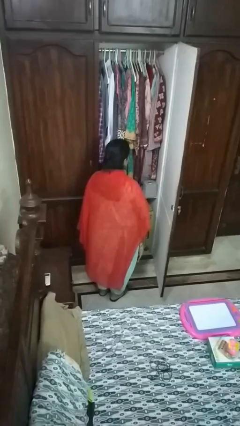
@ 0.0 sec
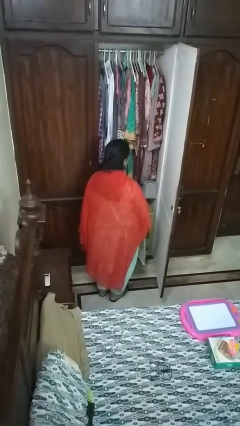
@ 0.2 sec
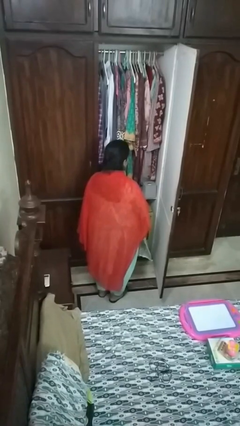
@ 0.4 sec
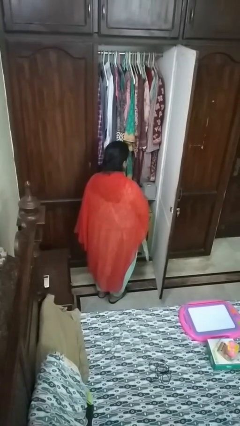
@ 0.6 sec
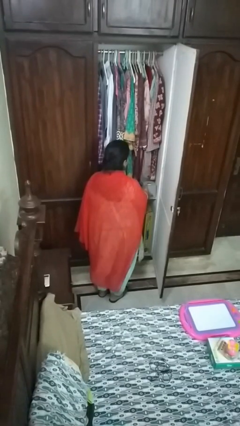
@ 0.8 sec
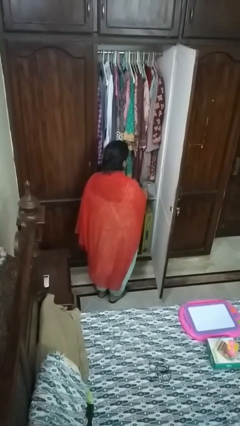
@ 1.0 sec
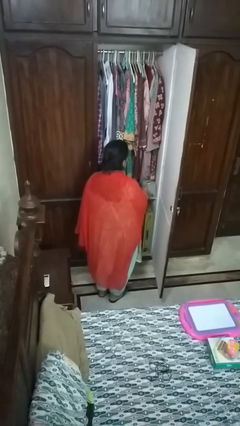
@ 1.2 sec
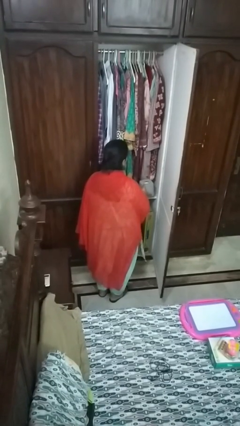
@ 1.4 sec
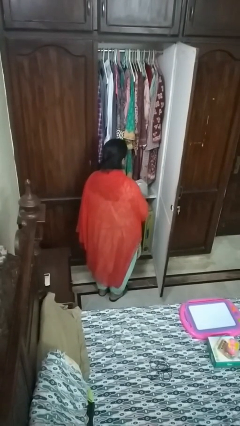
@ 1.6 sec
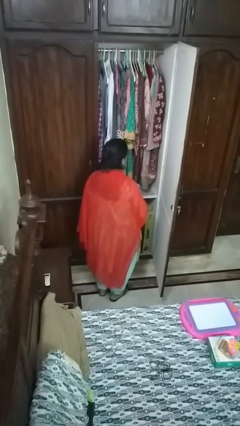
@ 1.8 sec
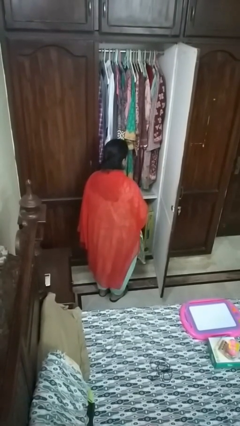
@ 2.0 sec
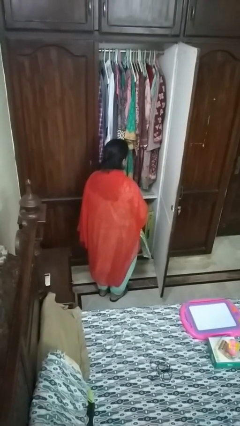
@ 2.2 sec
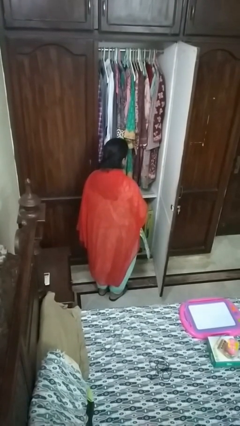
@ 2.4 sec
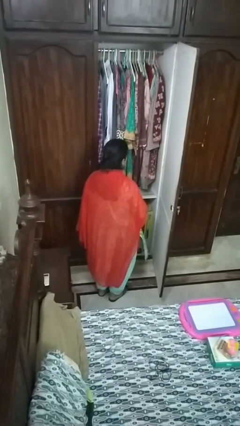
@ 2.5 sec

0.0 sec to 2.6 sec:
person picks up object from cabinet

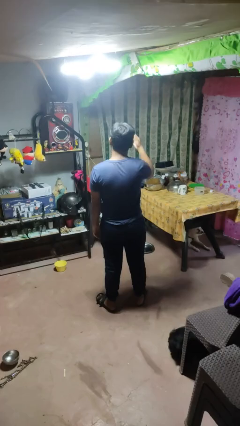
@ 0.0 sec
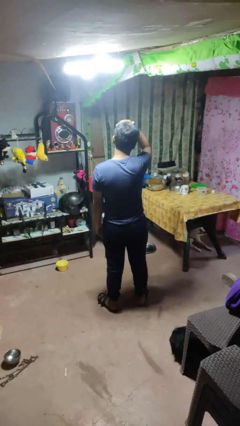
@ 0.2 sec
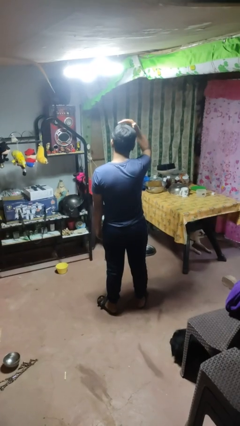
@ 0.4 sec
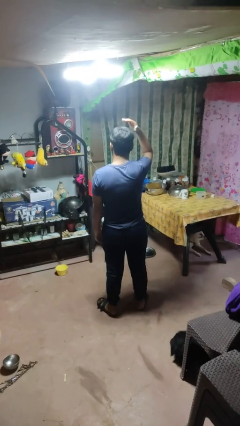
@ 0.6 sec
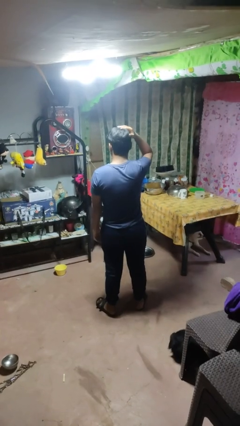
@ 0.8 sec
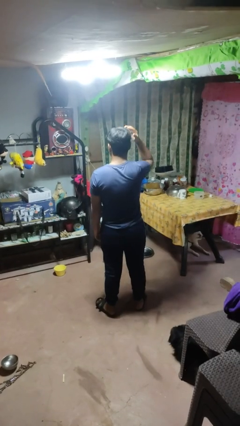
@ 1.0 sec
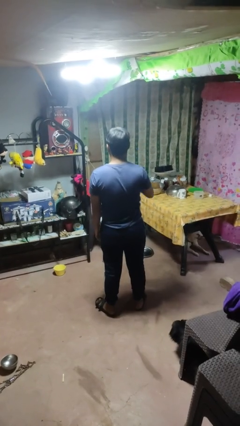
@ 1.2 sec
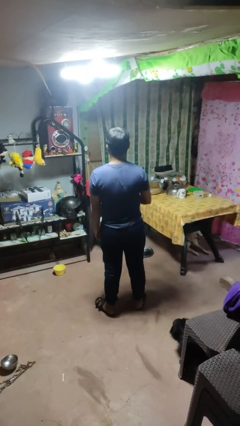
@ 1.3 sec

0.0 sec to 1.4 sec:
person pats head

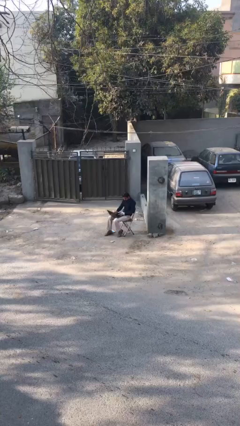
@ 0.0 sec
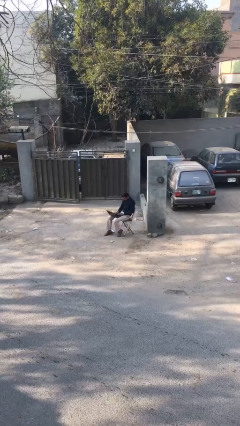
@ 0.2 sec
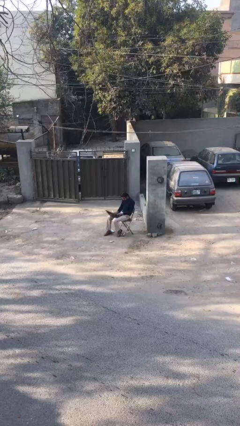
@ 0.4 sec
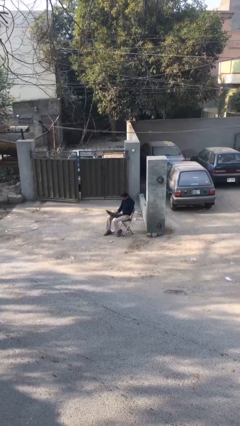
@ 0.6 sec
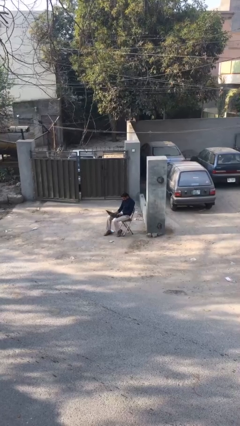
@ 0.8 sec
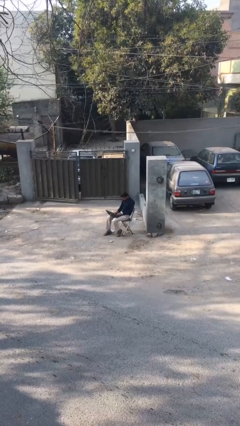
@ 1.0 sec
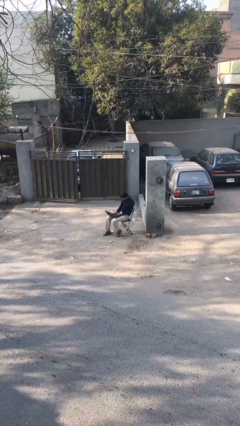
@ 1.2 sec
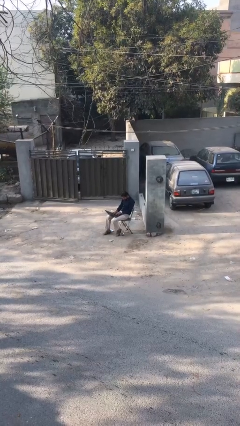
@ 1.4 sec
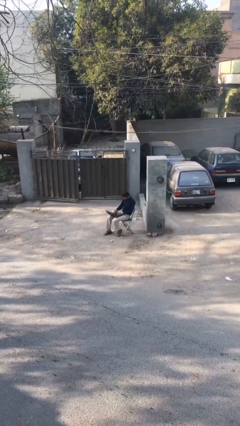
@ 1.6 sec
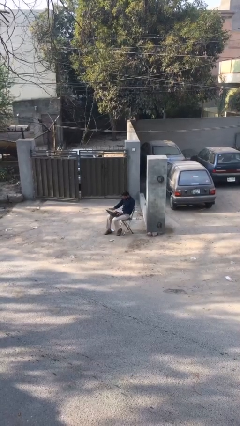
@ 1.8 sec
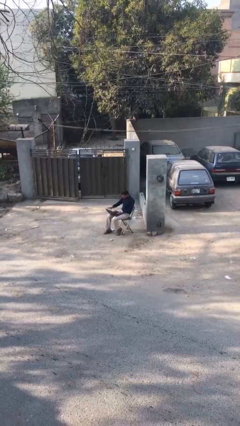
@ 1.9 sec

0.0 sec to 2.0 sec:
person interacts with laptop

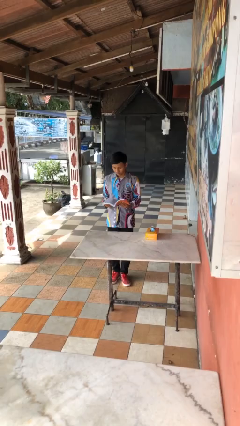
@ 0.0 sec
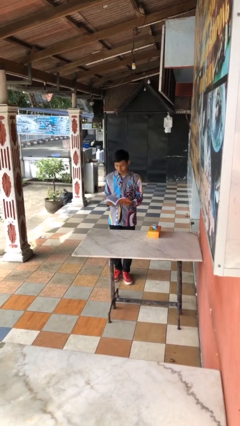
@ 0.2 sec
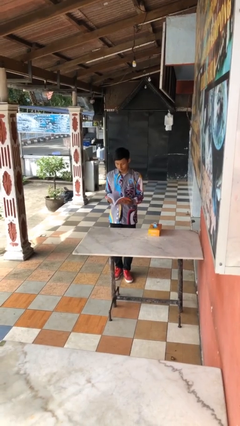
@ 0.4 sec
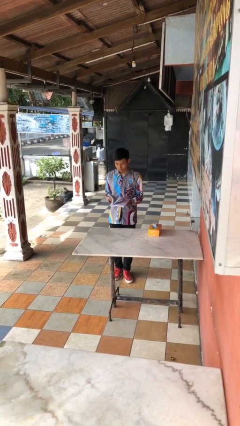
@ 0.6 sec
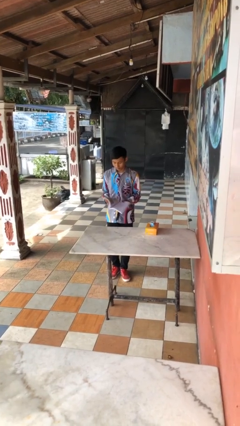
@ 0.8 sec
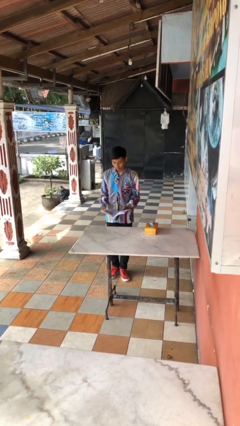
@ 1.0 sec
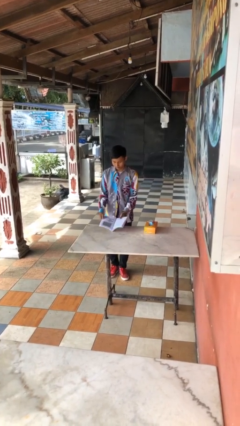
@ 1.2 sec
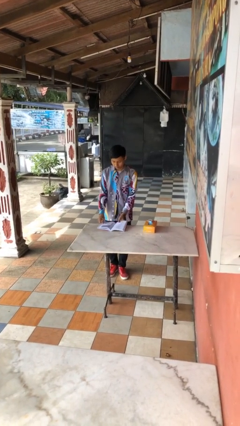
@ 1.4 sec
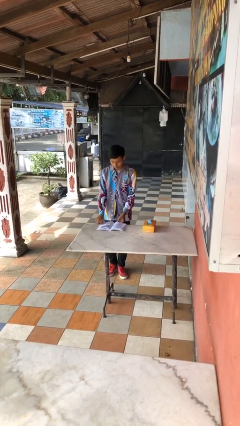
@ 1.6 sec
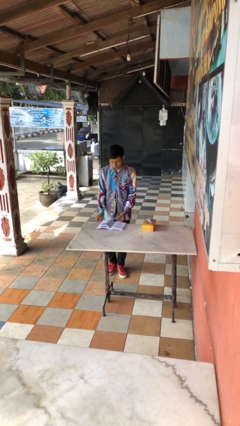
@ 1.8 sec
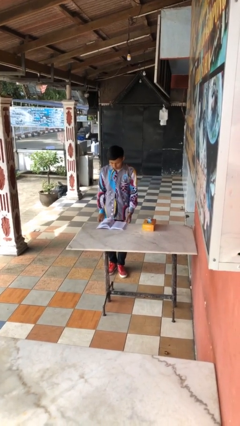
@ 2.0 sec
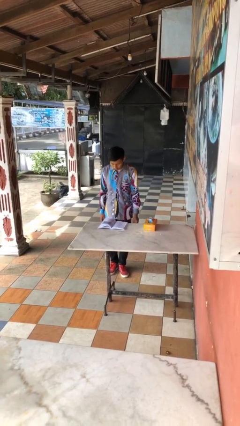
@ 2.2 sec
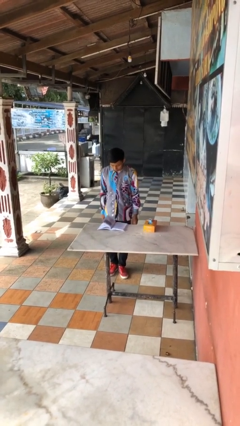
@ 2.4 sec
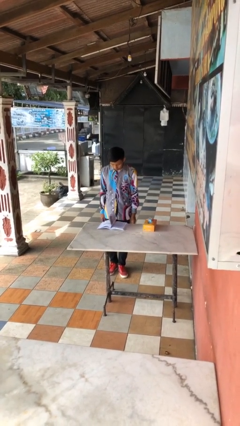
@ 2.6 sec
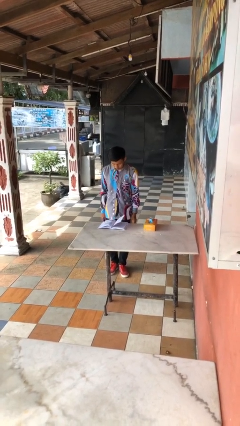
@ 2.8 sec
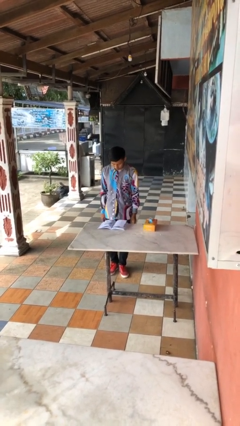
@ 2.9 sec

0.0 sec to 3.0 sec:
person puts down object on table

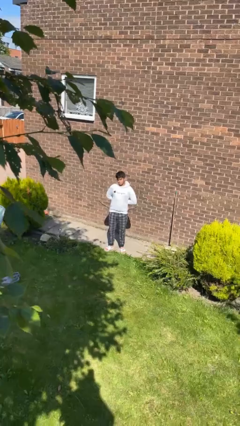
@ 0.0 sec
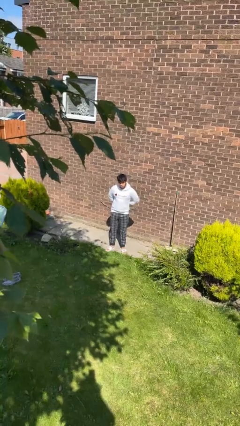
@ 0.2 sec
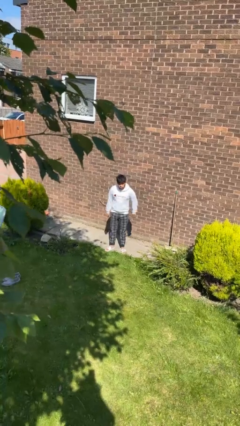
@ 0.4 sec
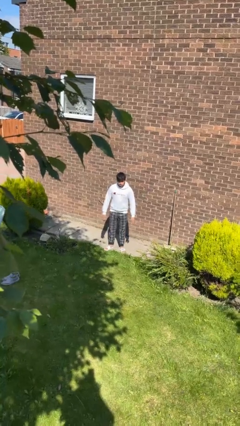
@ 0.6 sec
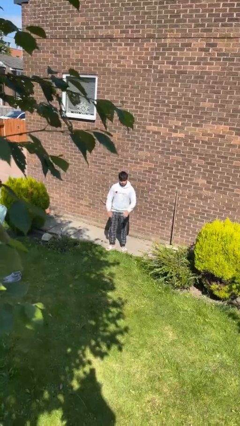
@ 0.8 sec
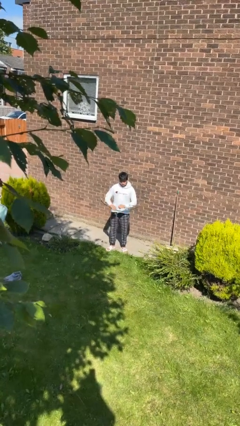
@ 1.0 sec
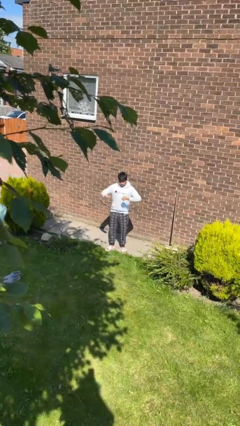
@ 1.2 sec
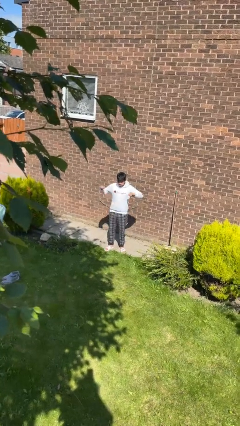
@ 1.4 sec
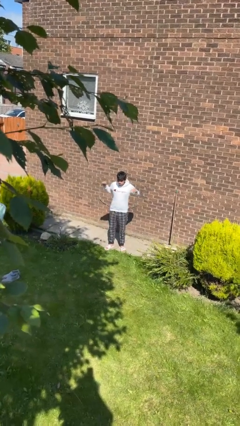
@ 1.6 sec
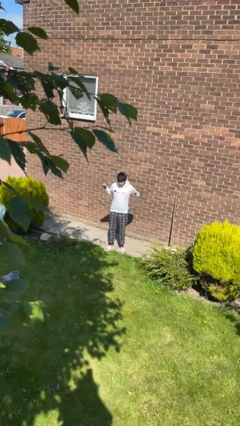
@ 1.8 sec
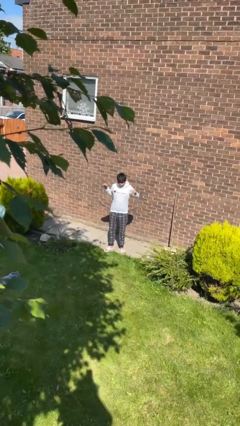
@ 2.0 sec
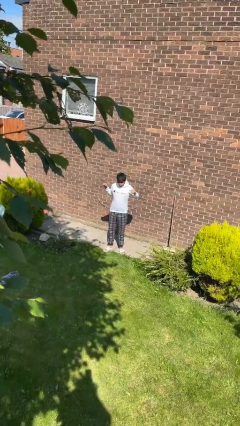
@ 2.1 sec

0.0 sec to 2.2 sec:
person stretches arms to side

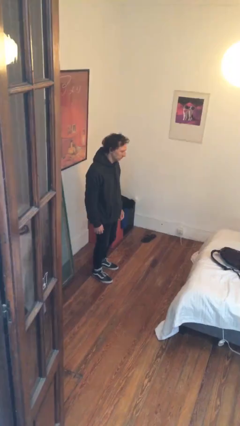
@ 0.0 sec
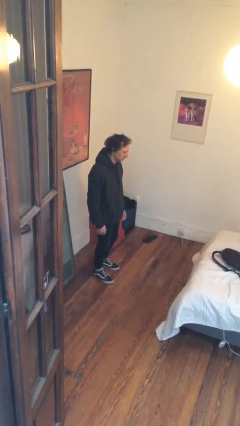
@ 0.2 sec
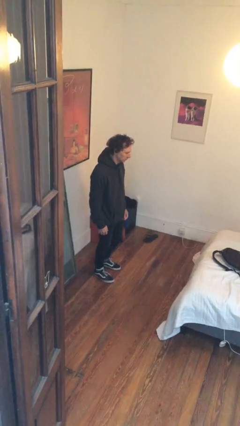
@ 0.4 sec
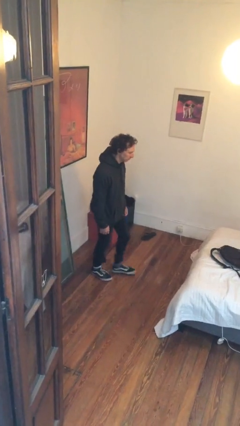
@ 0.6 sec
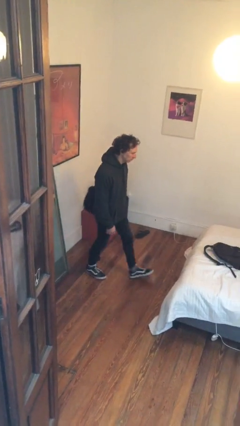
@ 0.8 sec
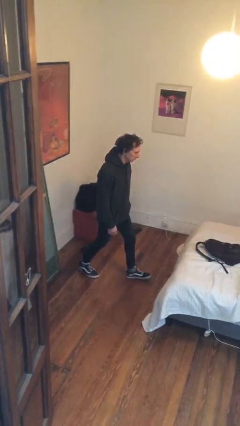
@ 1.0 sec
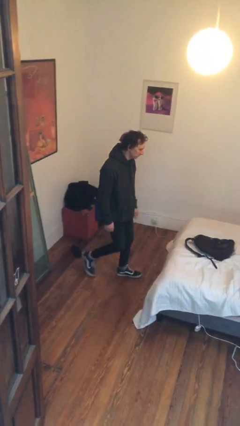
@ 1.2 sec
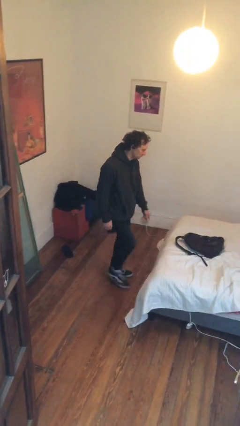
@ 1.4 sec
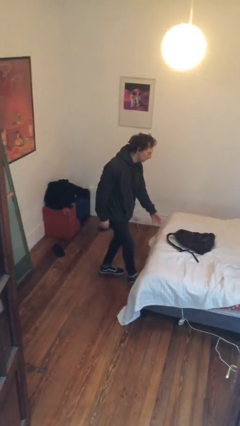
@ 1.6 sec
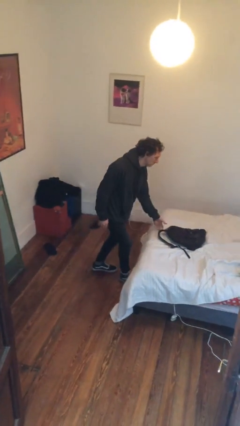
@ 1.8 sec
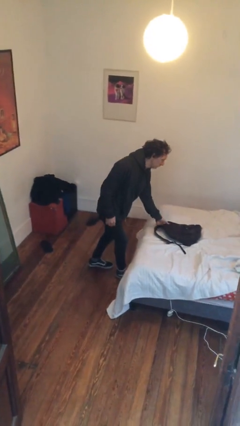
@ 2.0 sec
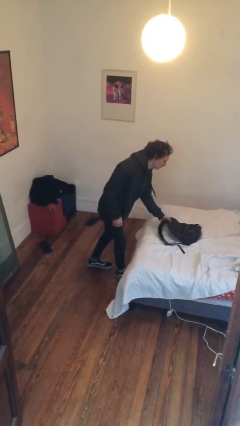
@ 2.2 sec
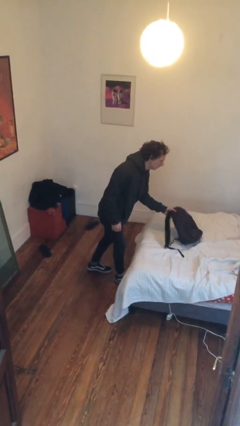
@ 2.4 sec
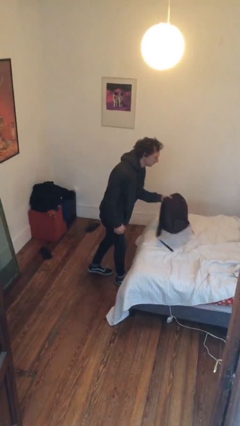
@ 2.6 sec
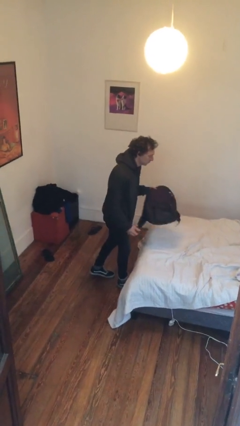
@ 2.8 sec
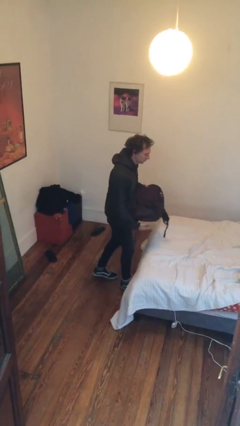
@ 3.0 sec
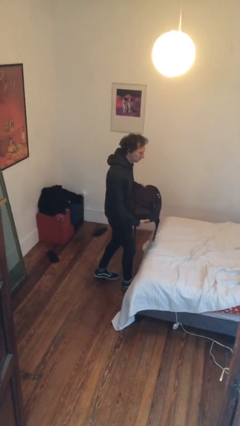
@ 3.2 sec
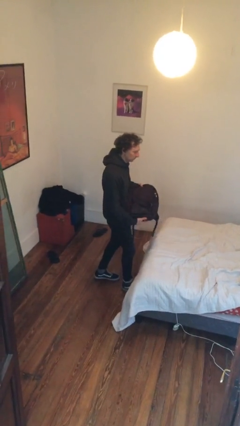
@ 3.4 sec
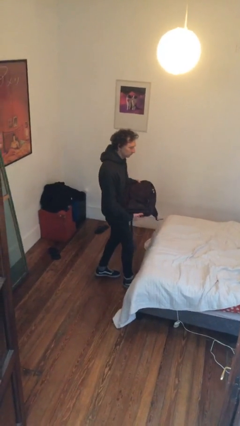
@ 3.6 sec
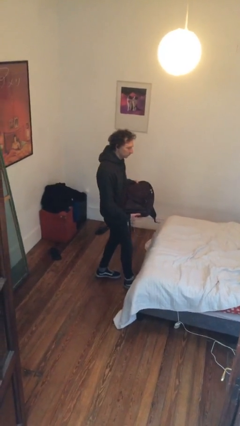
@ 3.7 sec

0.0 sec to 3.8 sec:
person picks up object from bed

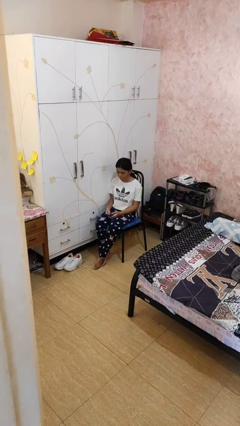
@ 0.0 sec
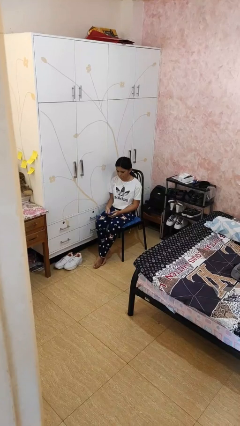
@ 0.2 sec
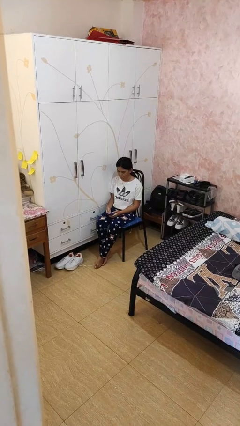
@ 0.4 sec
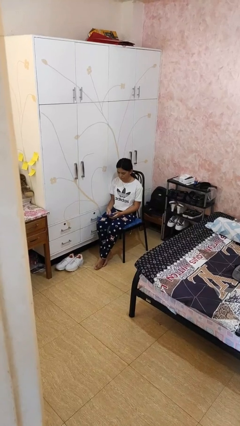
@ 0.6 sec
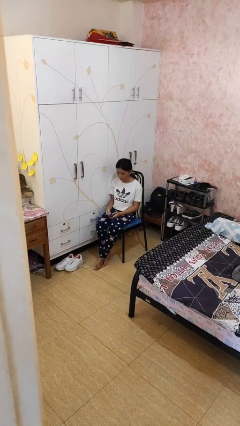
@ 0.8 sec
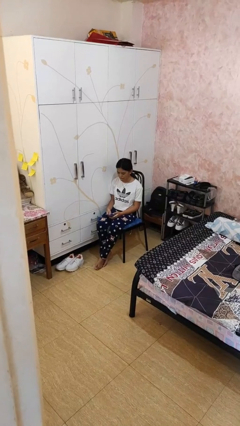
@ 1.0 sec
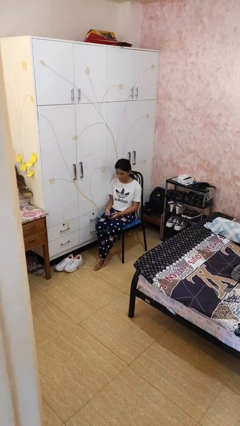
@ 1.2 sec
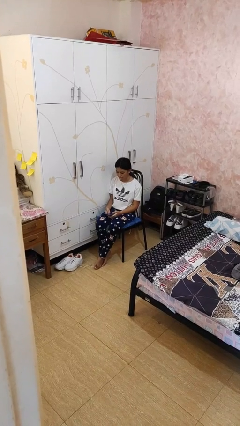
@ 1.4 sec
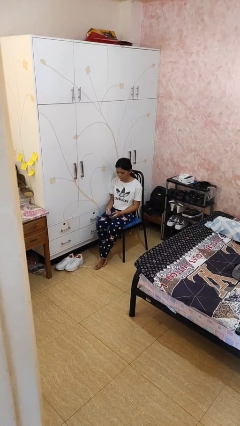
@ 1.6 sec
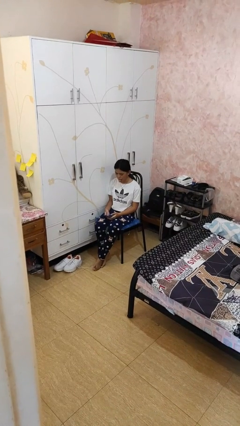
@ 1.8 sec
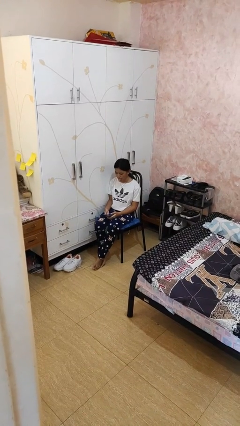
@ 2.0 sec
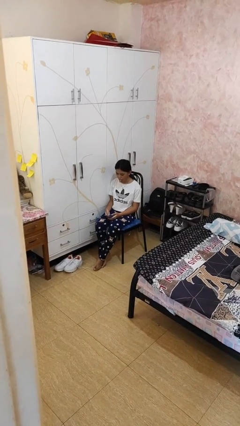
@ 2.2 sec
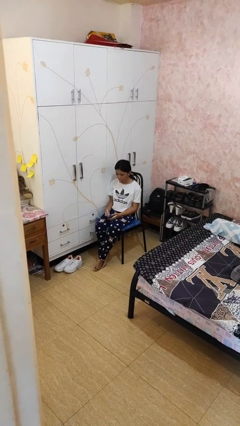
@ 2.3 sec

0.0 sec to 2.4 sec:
person sticks out tongue
